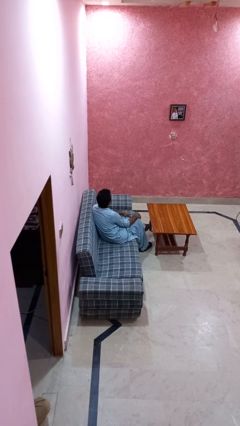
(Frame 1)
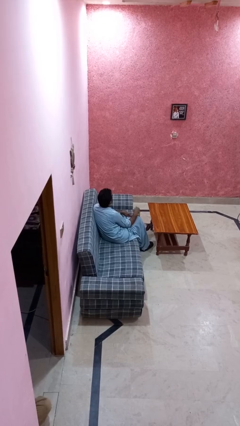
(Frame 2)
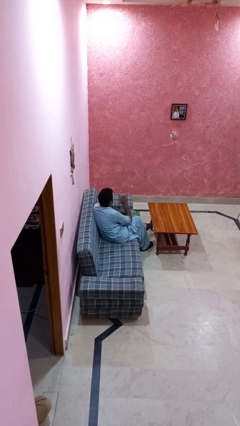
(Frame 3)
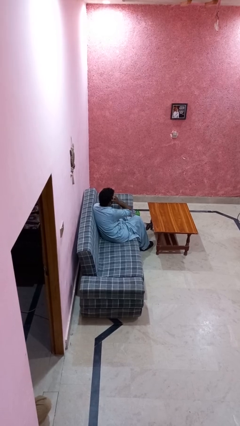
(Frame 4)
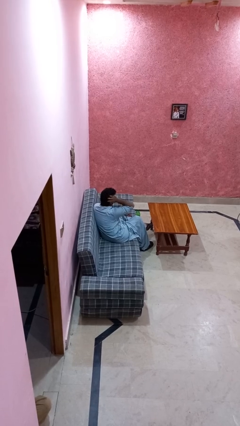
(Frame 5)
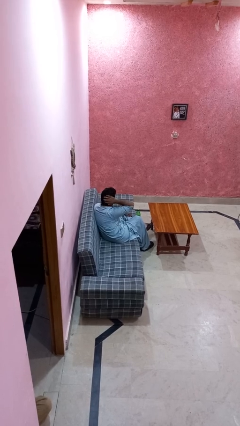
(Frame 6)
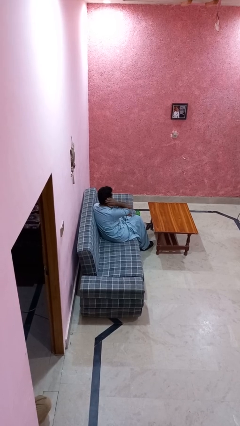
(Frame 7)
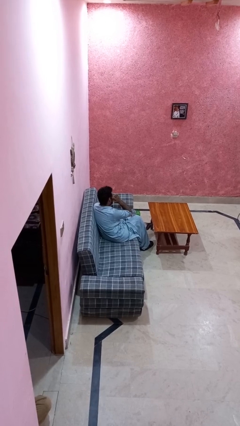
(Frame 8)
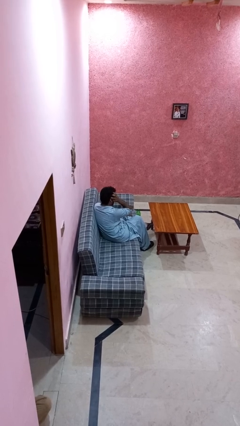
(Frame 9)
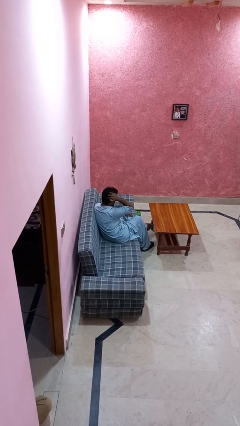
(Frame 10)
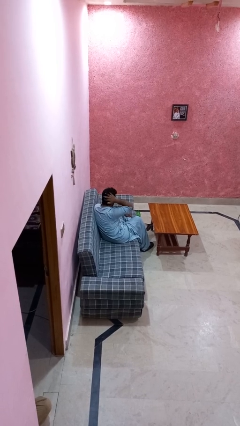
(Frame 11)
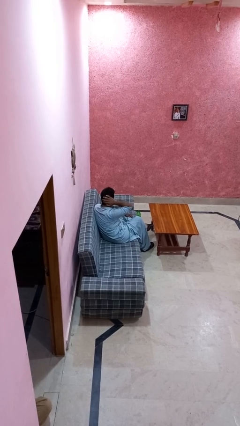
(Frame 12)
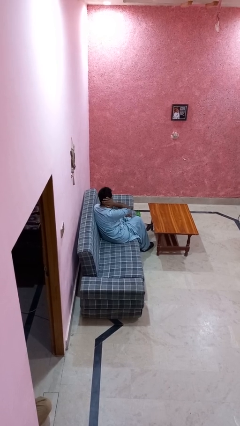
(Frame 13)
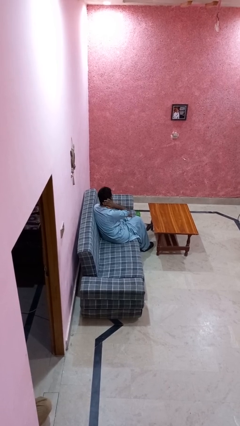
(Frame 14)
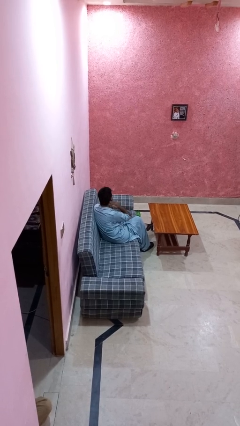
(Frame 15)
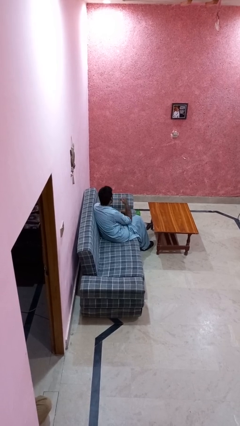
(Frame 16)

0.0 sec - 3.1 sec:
person strokes hair

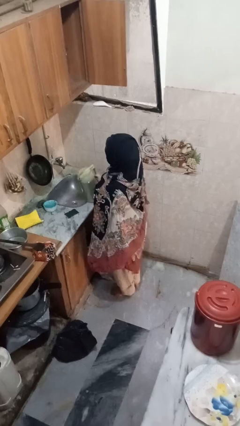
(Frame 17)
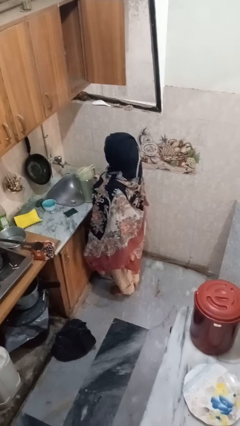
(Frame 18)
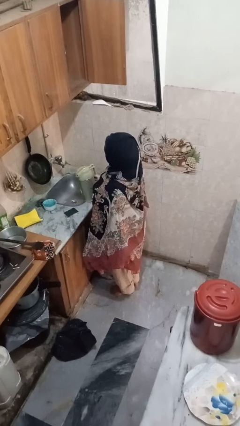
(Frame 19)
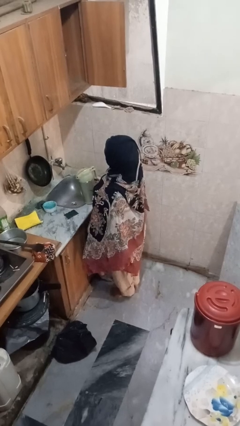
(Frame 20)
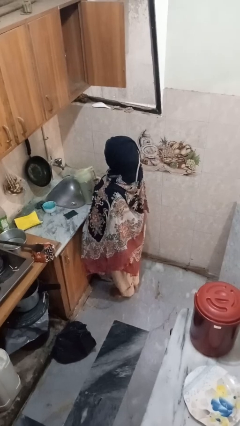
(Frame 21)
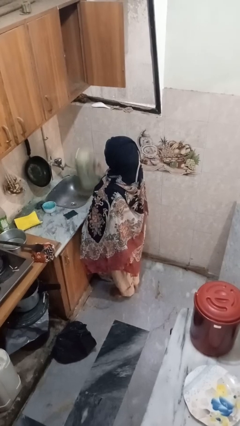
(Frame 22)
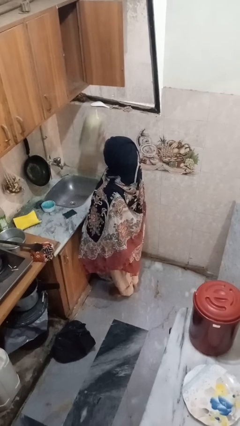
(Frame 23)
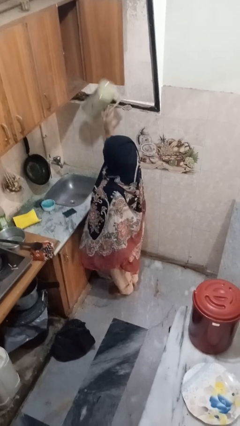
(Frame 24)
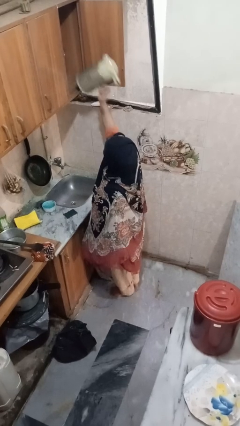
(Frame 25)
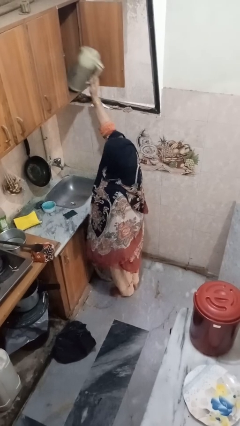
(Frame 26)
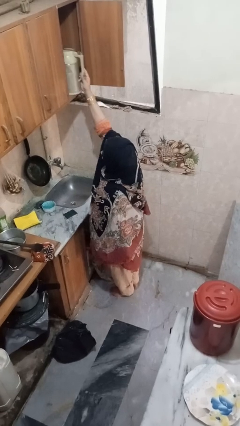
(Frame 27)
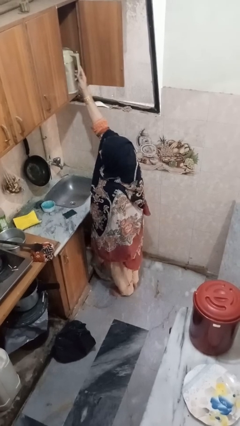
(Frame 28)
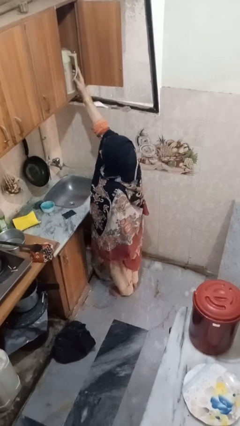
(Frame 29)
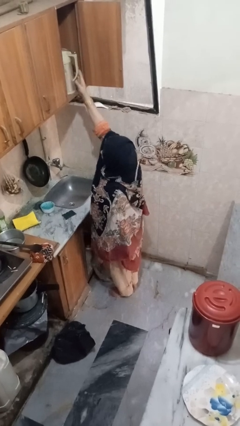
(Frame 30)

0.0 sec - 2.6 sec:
person takes object from cabinet

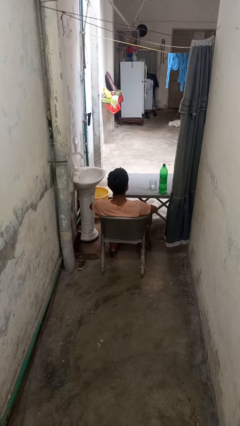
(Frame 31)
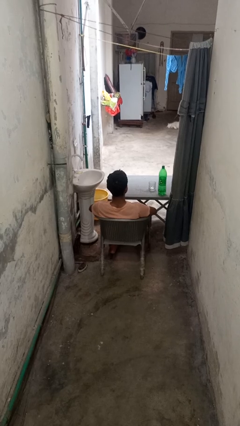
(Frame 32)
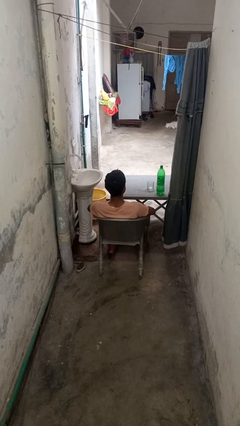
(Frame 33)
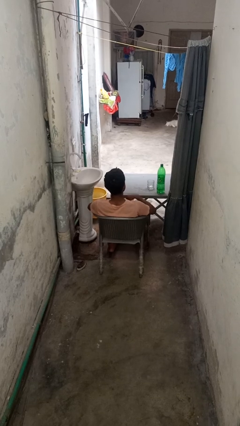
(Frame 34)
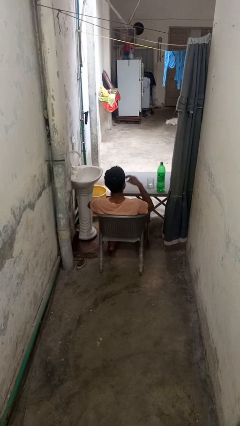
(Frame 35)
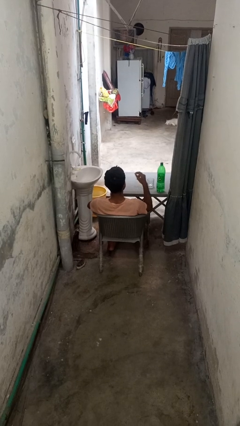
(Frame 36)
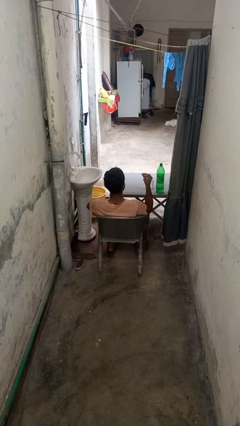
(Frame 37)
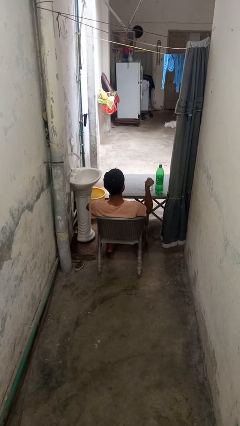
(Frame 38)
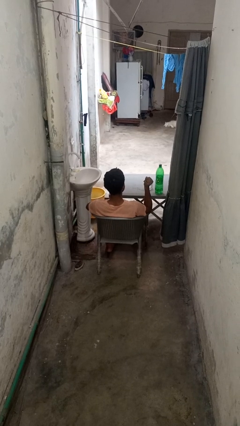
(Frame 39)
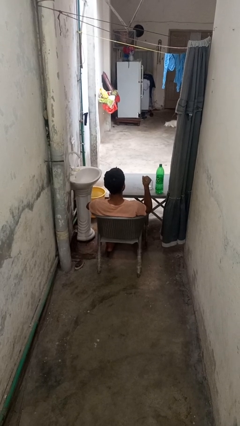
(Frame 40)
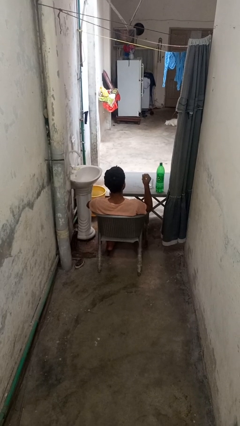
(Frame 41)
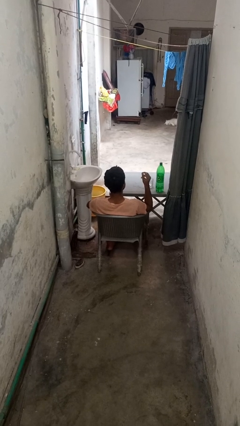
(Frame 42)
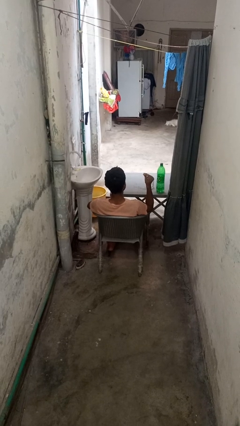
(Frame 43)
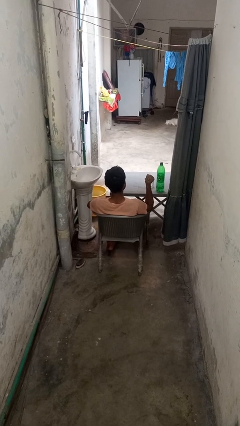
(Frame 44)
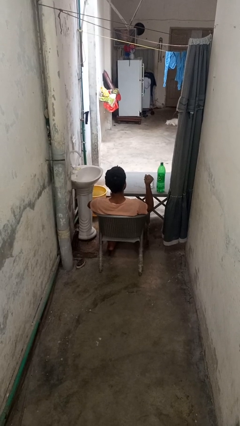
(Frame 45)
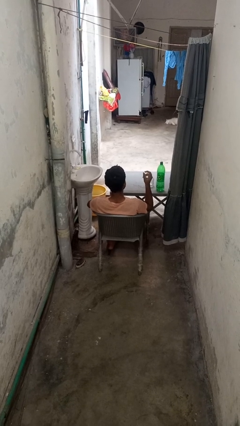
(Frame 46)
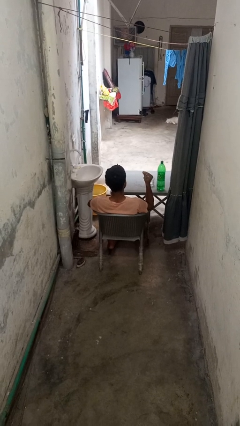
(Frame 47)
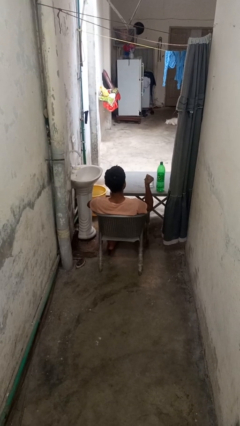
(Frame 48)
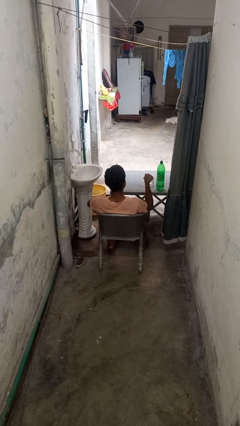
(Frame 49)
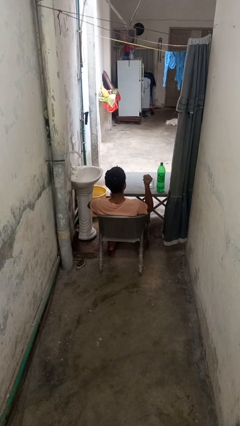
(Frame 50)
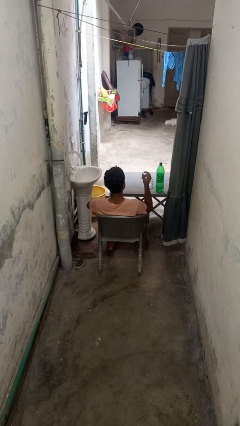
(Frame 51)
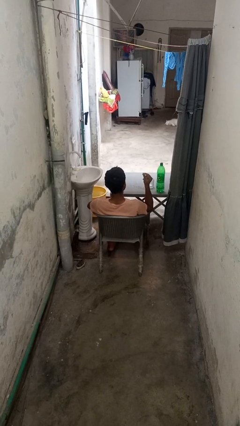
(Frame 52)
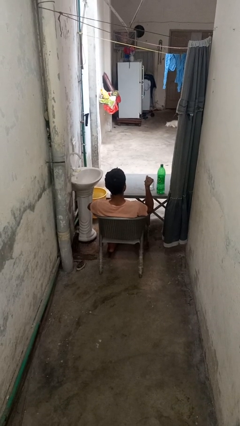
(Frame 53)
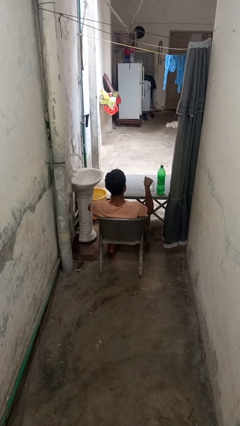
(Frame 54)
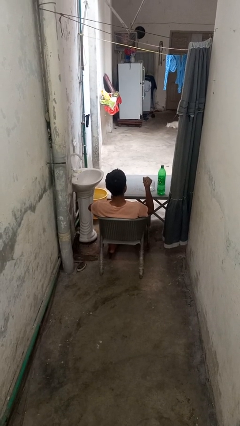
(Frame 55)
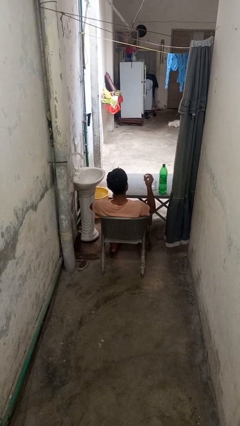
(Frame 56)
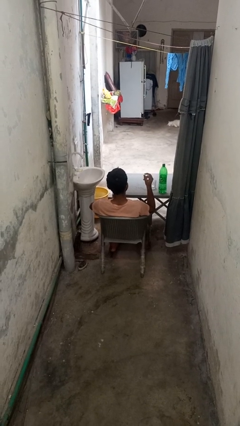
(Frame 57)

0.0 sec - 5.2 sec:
person snaps fingers

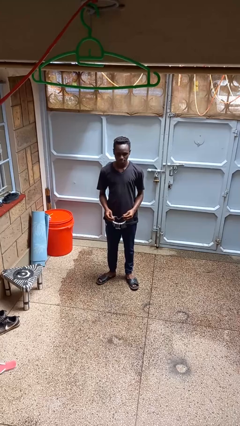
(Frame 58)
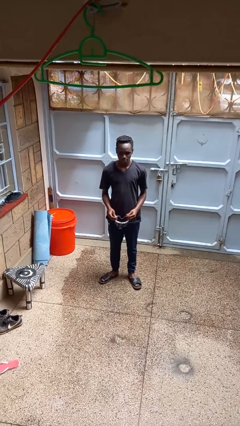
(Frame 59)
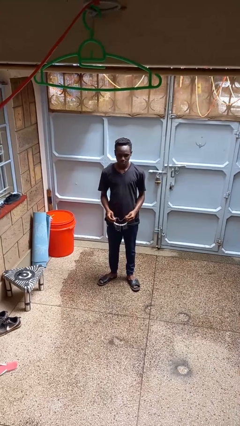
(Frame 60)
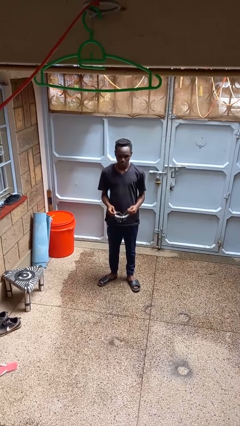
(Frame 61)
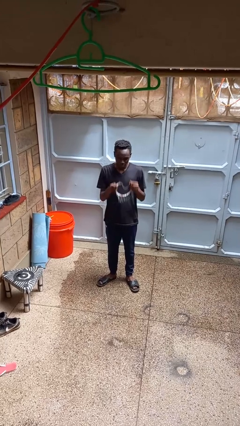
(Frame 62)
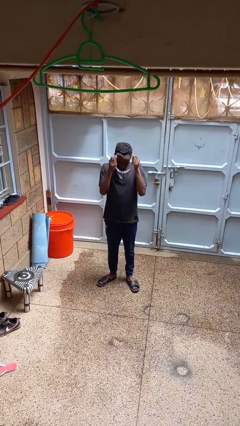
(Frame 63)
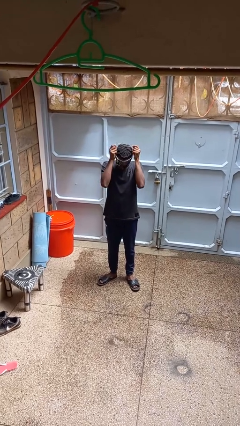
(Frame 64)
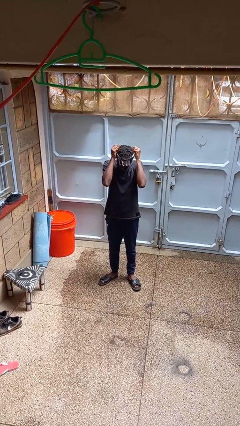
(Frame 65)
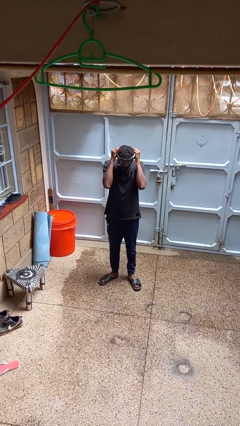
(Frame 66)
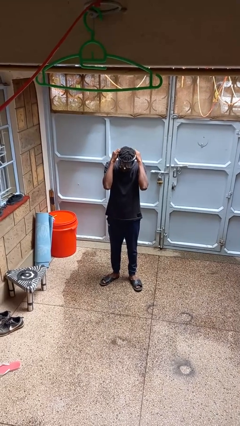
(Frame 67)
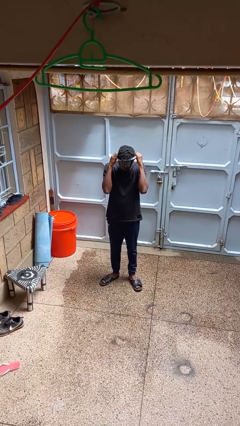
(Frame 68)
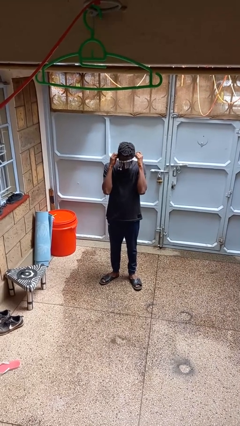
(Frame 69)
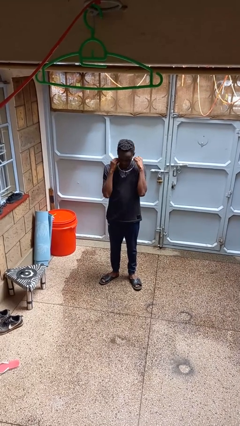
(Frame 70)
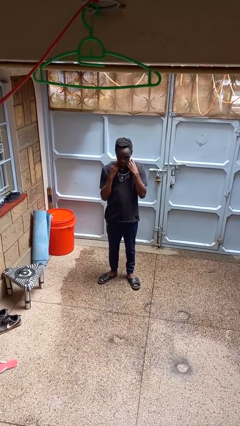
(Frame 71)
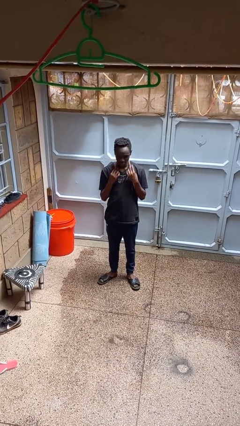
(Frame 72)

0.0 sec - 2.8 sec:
person puts on necklace

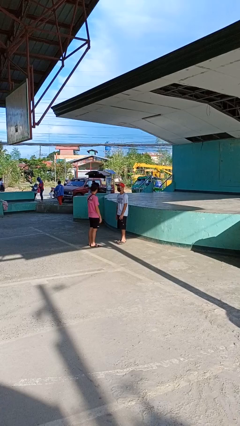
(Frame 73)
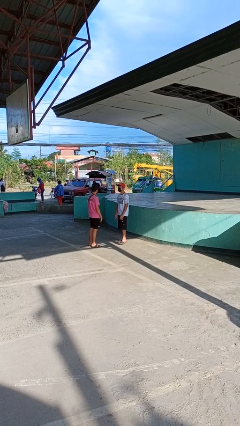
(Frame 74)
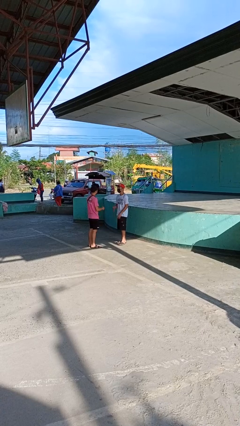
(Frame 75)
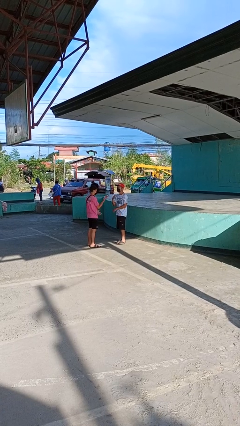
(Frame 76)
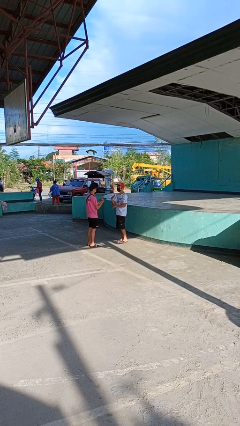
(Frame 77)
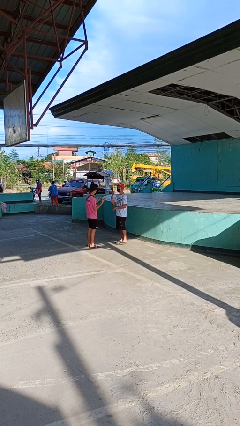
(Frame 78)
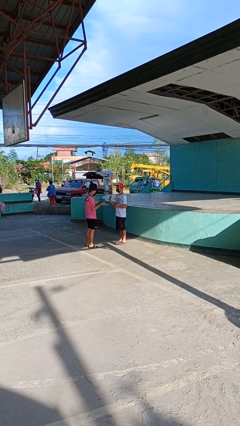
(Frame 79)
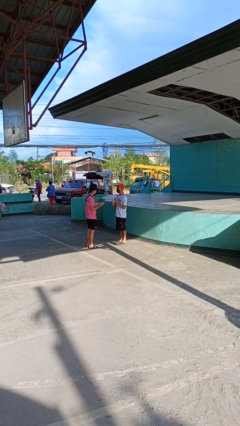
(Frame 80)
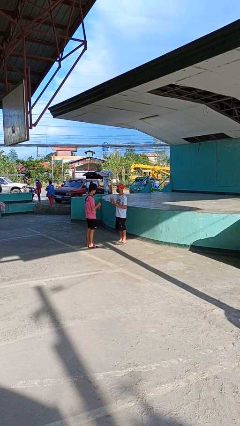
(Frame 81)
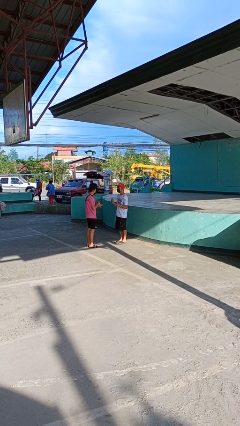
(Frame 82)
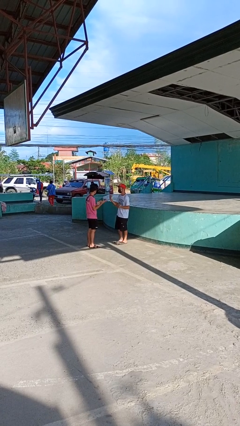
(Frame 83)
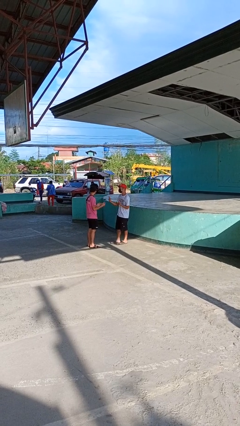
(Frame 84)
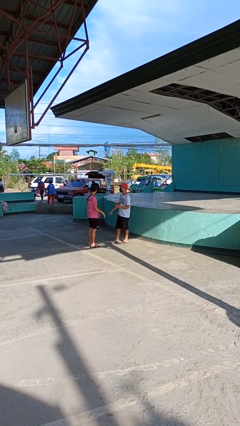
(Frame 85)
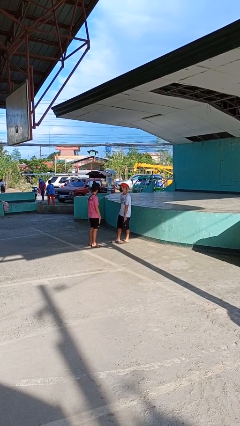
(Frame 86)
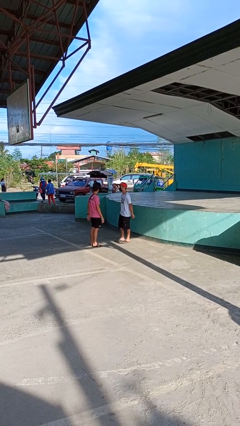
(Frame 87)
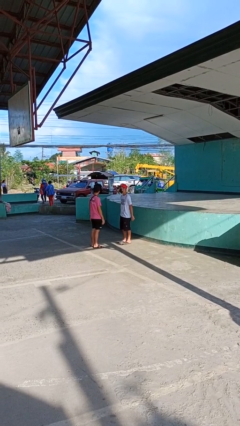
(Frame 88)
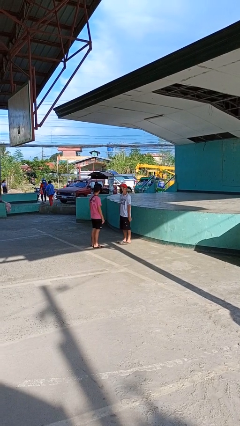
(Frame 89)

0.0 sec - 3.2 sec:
person talks to person

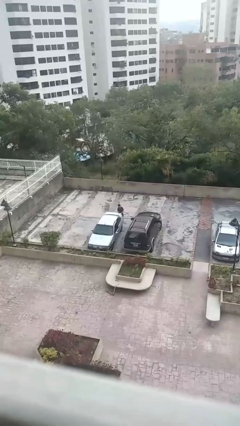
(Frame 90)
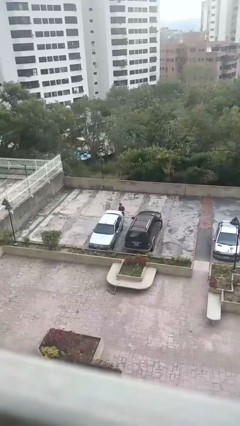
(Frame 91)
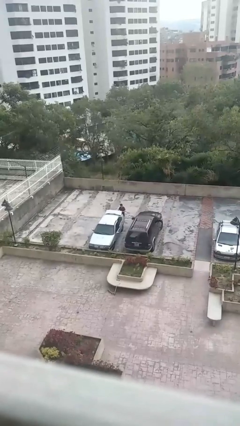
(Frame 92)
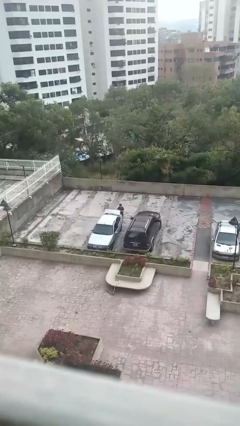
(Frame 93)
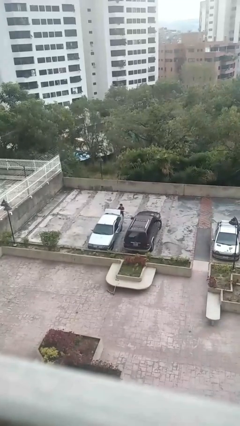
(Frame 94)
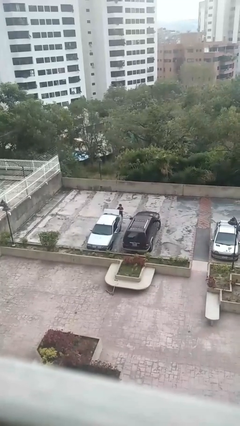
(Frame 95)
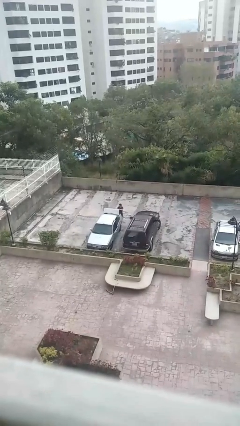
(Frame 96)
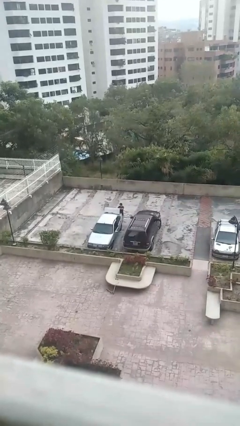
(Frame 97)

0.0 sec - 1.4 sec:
person opens car trunk
